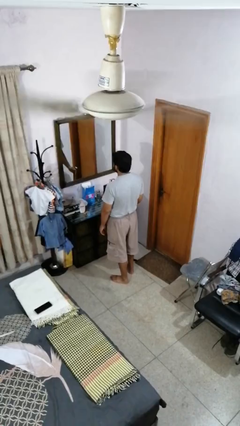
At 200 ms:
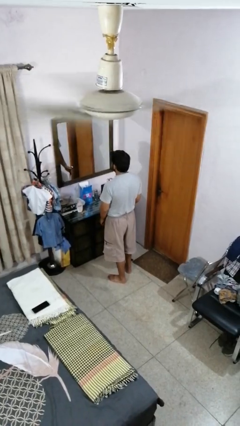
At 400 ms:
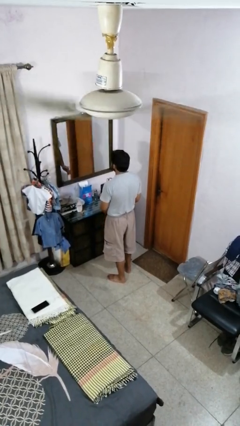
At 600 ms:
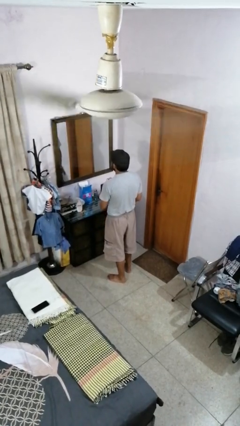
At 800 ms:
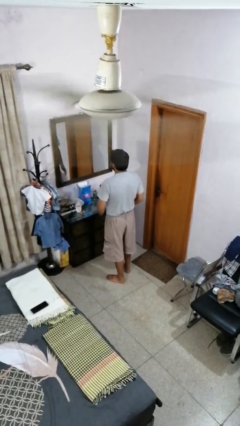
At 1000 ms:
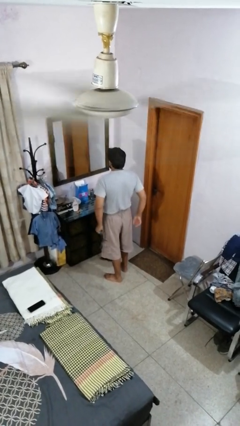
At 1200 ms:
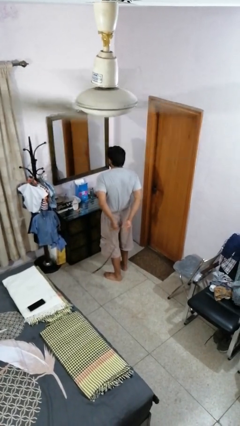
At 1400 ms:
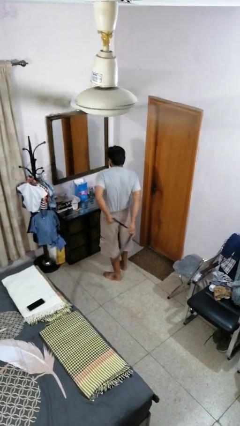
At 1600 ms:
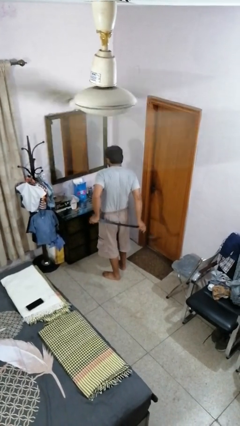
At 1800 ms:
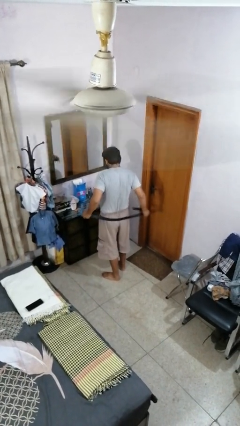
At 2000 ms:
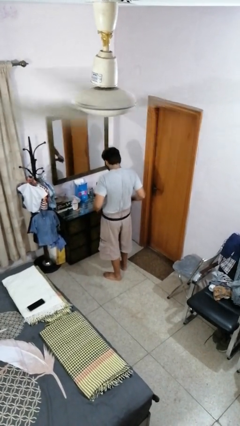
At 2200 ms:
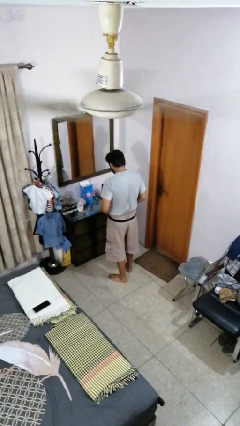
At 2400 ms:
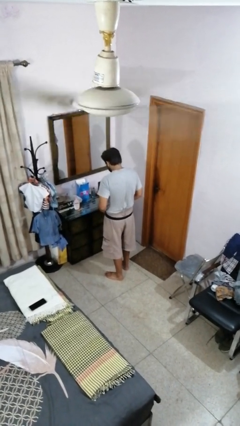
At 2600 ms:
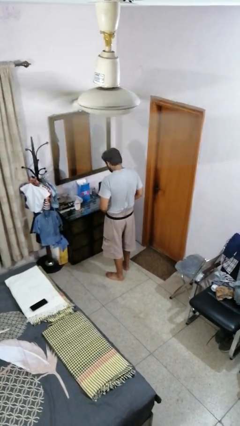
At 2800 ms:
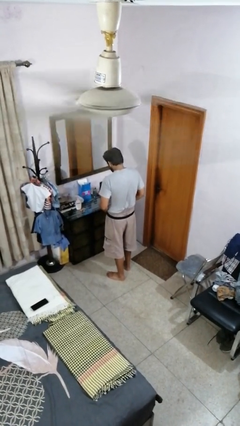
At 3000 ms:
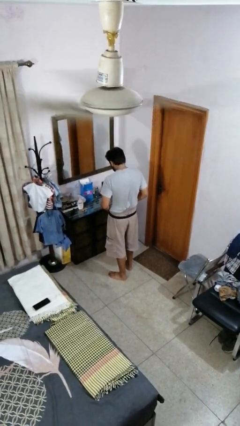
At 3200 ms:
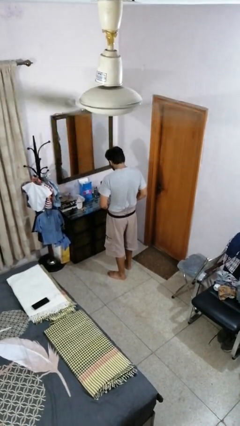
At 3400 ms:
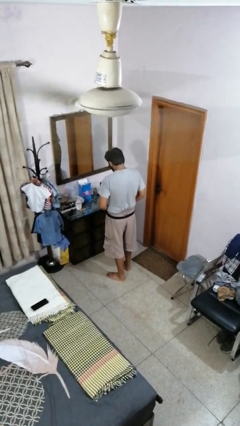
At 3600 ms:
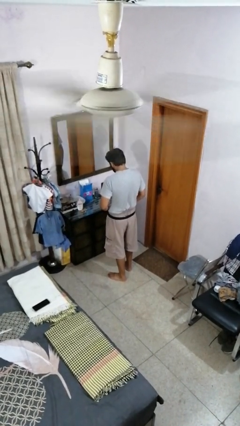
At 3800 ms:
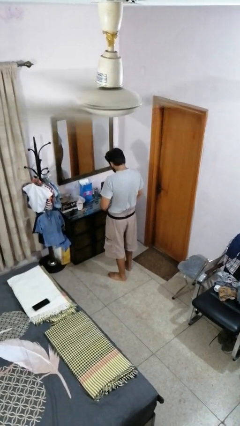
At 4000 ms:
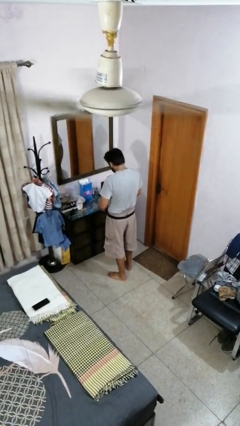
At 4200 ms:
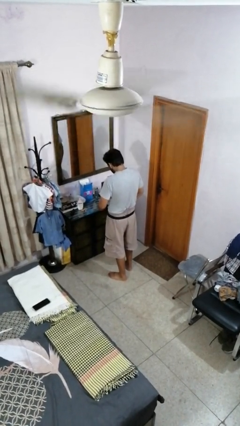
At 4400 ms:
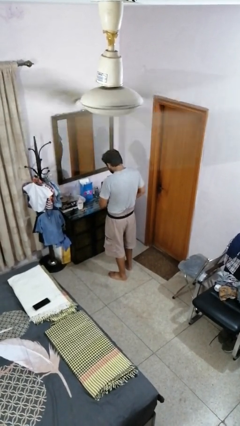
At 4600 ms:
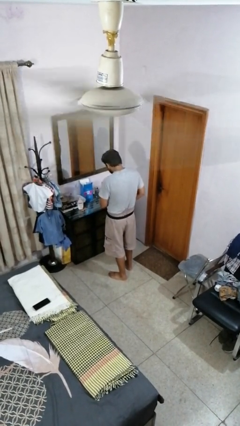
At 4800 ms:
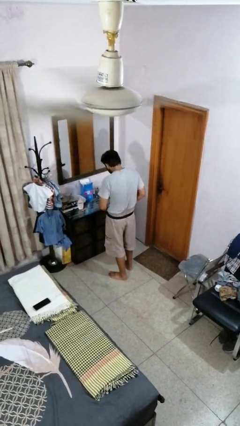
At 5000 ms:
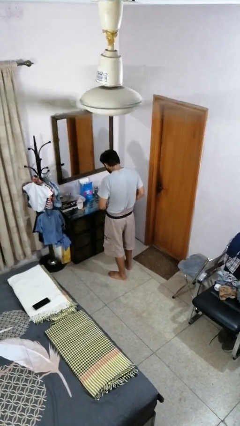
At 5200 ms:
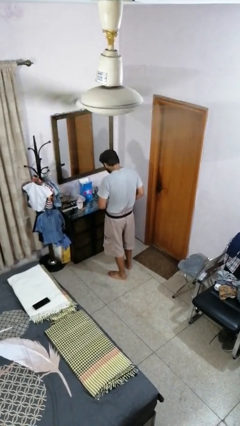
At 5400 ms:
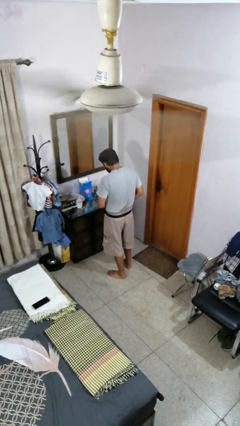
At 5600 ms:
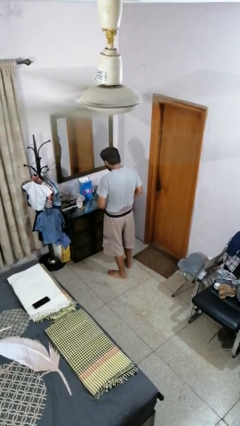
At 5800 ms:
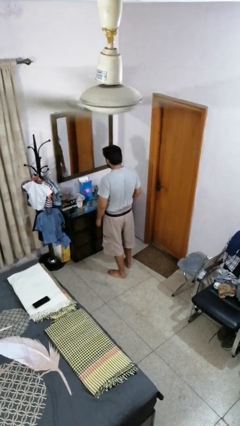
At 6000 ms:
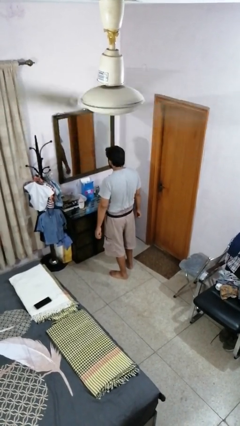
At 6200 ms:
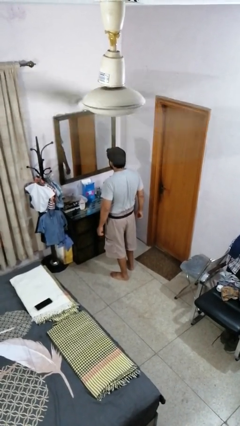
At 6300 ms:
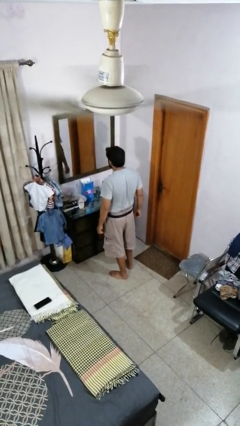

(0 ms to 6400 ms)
person puts on belt

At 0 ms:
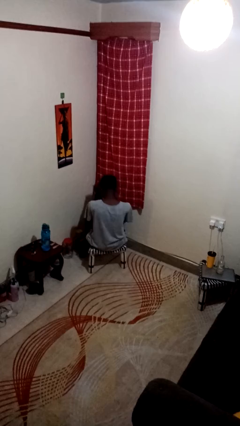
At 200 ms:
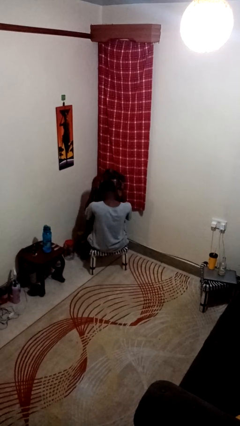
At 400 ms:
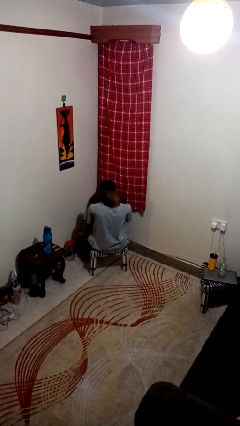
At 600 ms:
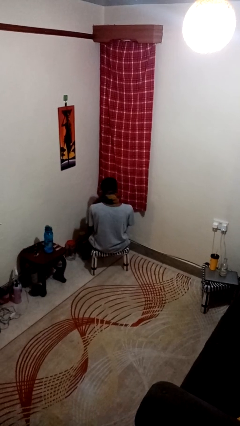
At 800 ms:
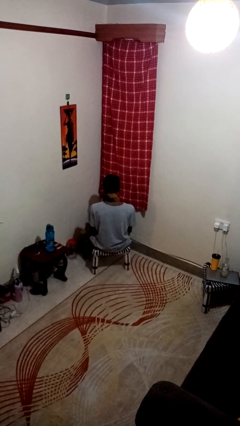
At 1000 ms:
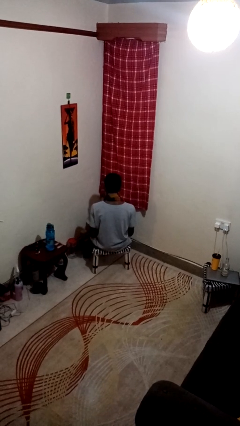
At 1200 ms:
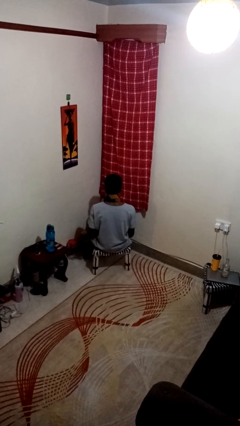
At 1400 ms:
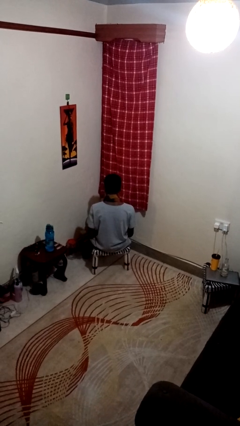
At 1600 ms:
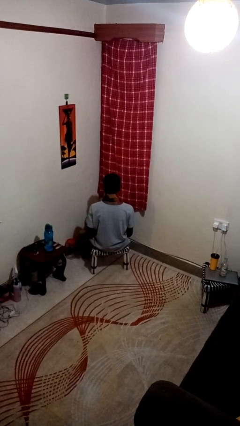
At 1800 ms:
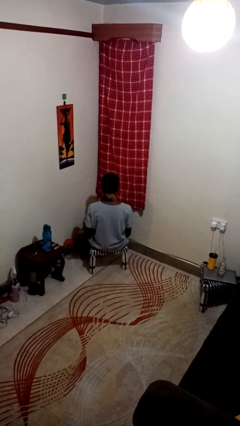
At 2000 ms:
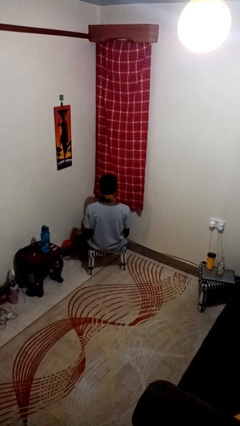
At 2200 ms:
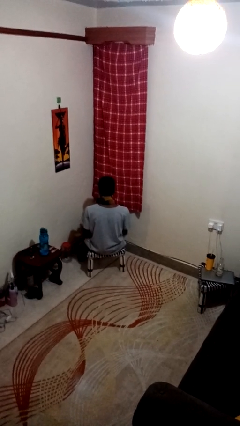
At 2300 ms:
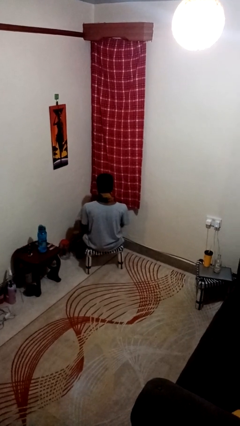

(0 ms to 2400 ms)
person puts on scarf

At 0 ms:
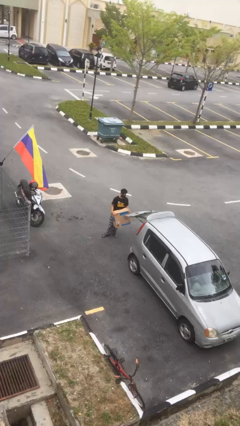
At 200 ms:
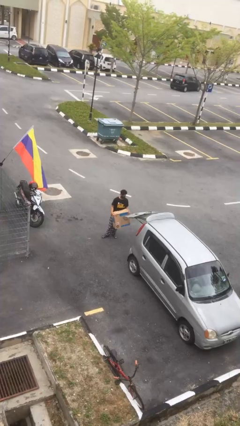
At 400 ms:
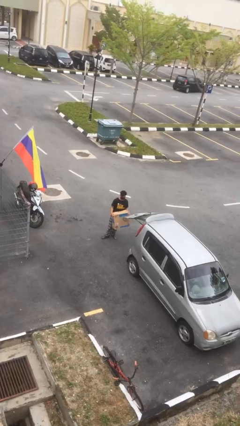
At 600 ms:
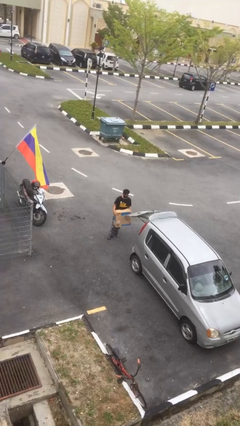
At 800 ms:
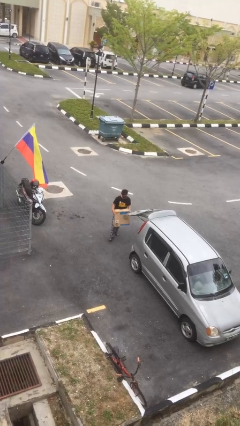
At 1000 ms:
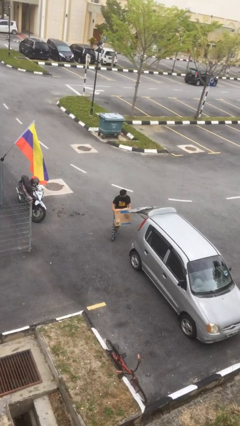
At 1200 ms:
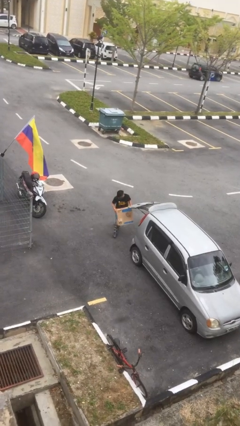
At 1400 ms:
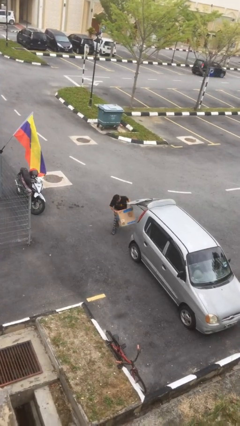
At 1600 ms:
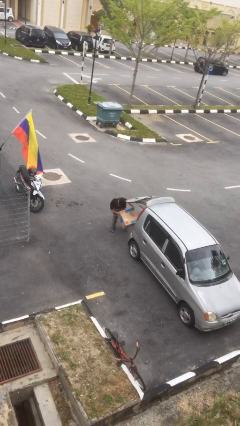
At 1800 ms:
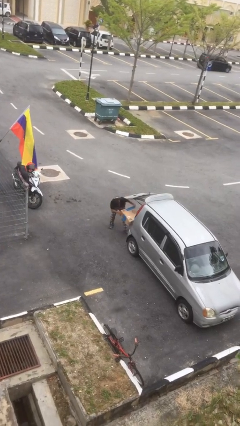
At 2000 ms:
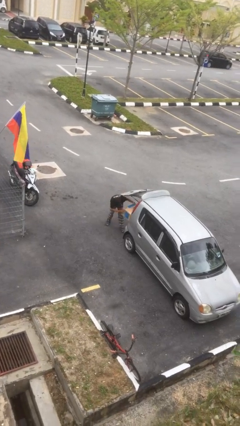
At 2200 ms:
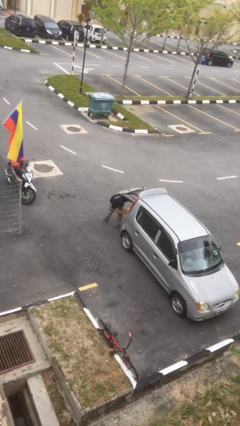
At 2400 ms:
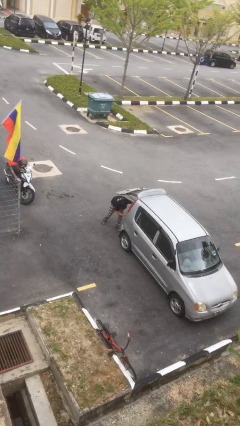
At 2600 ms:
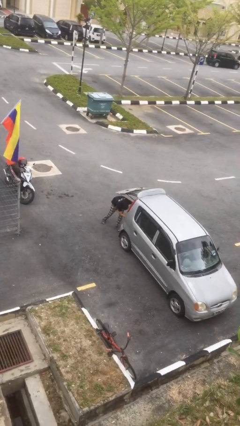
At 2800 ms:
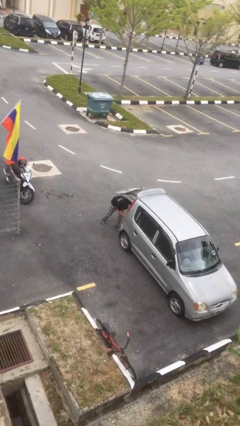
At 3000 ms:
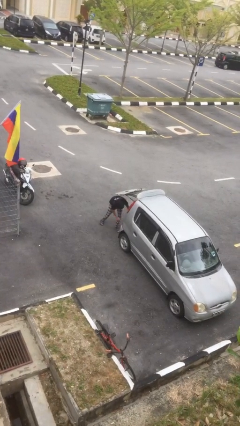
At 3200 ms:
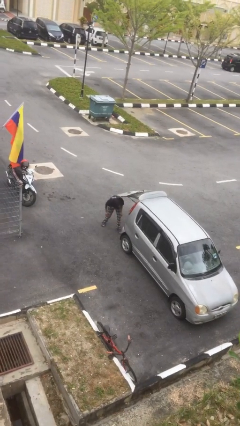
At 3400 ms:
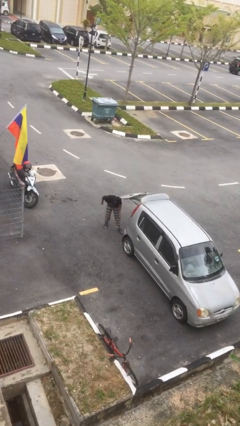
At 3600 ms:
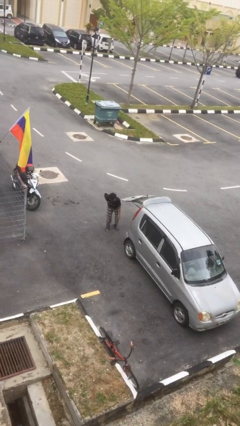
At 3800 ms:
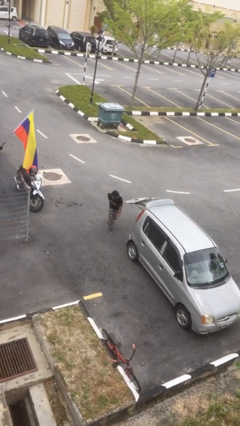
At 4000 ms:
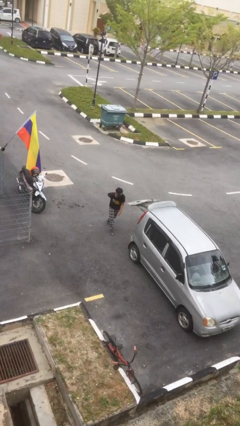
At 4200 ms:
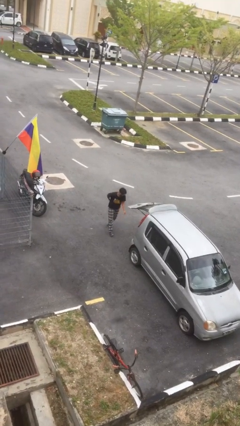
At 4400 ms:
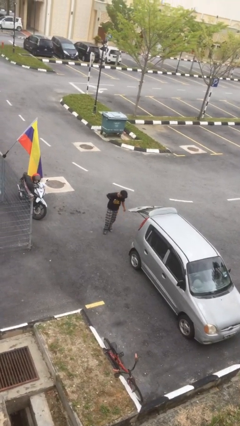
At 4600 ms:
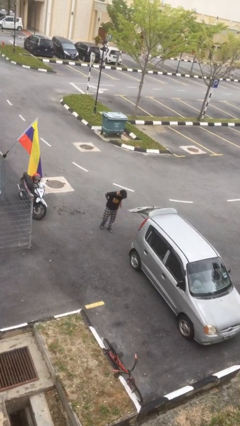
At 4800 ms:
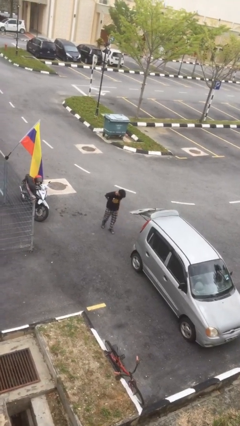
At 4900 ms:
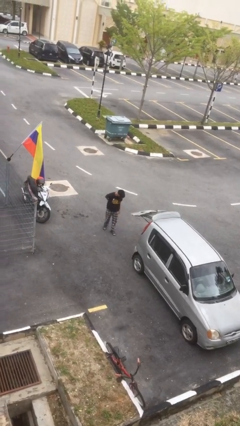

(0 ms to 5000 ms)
person loads car

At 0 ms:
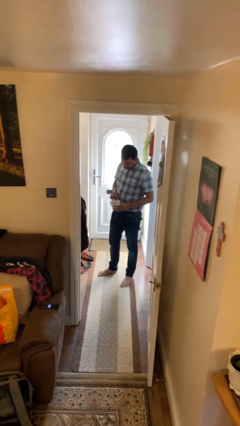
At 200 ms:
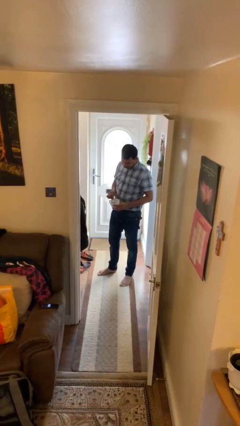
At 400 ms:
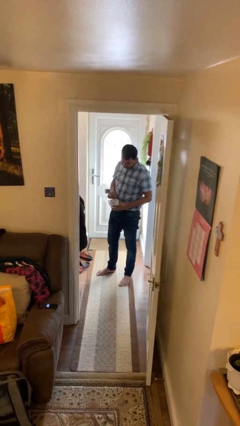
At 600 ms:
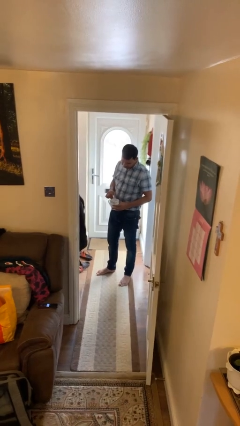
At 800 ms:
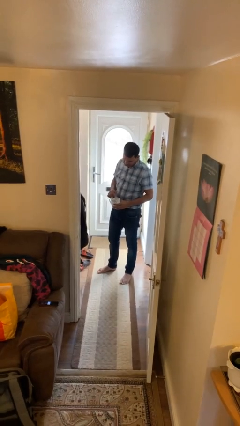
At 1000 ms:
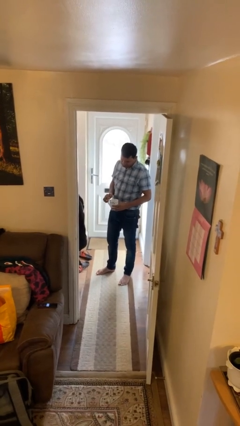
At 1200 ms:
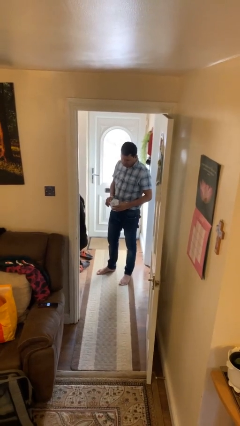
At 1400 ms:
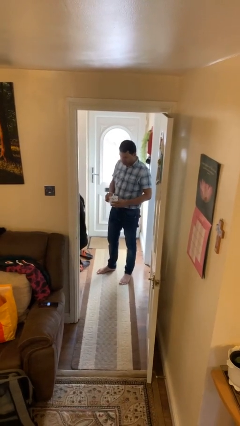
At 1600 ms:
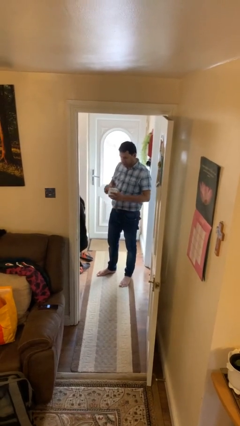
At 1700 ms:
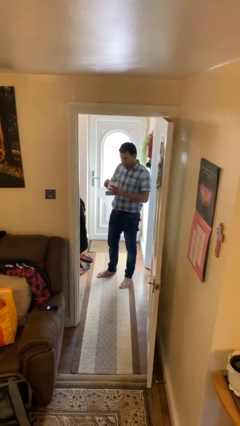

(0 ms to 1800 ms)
person stirs mug

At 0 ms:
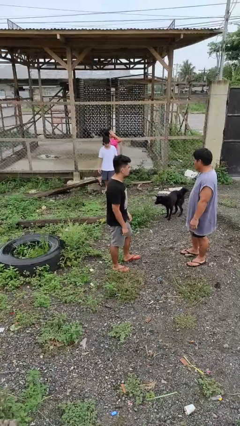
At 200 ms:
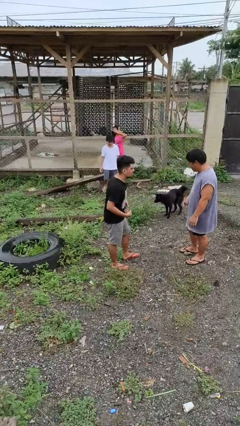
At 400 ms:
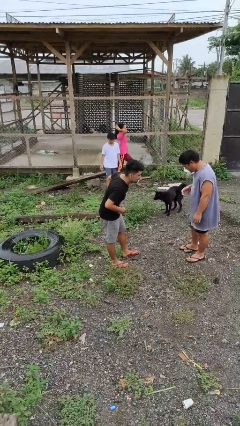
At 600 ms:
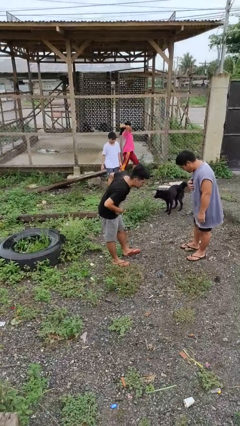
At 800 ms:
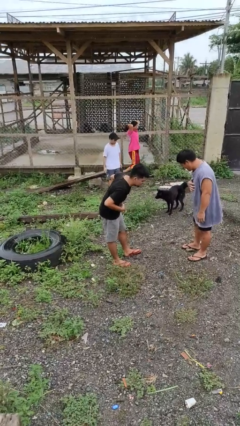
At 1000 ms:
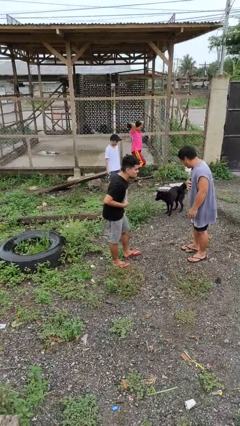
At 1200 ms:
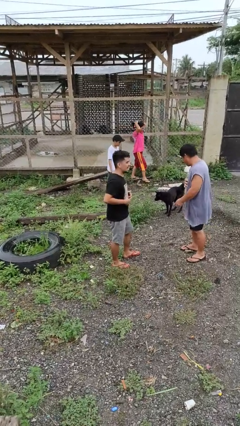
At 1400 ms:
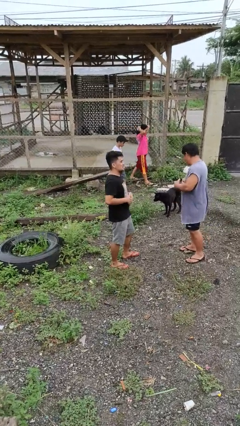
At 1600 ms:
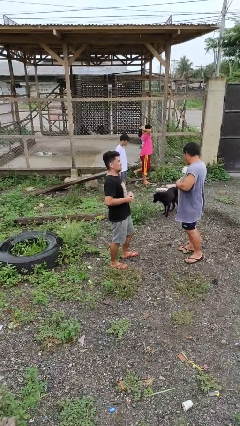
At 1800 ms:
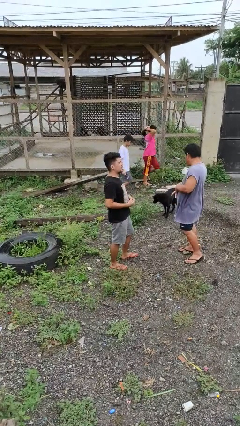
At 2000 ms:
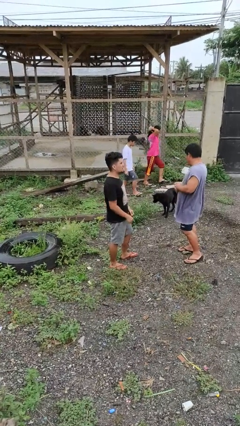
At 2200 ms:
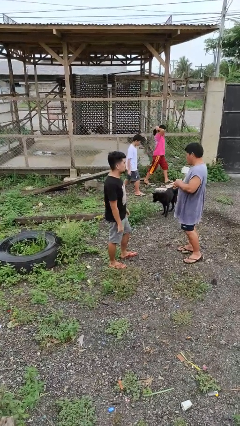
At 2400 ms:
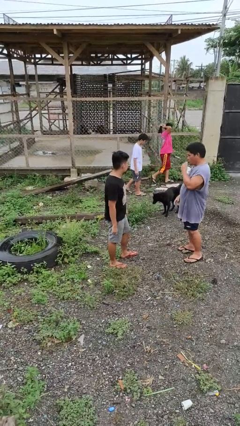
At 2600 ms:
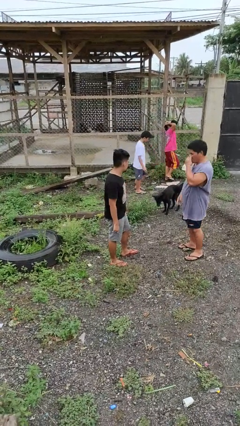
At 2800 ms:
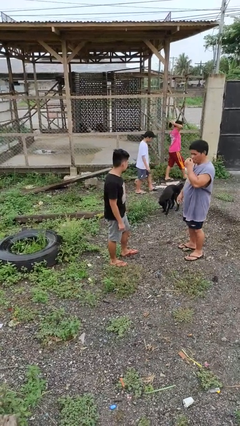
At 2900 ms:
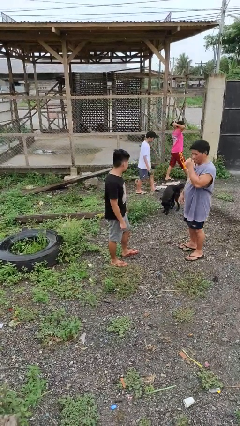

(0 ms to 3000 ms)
person laughs with person